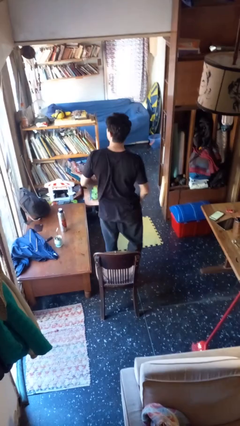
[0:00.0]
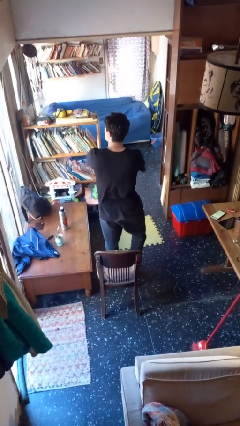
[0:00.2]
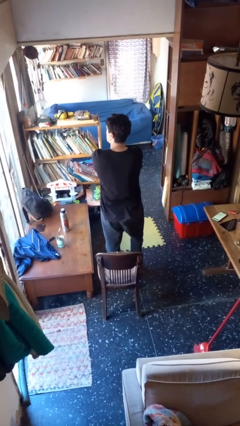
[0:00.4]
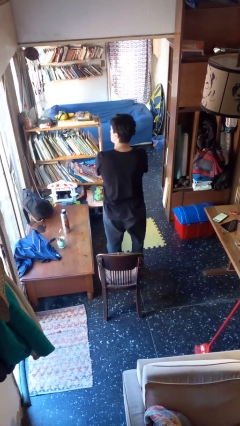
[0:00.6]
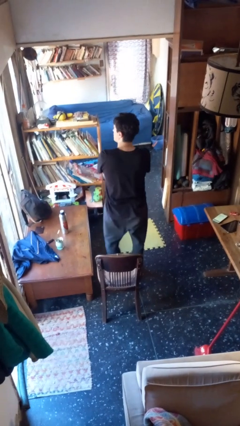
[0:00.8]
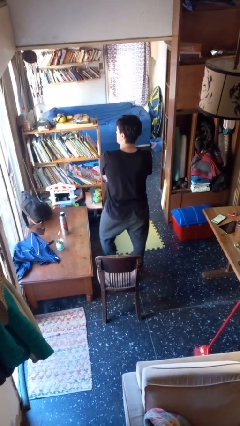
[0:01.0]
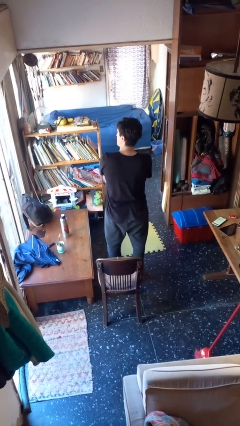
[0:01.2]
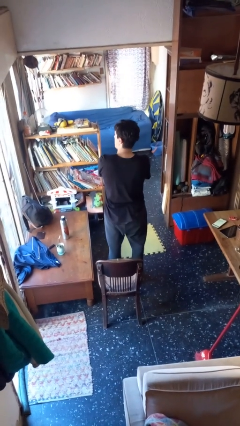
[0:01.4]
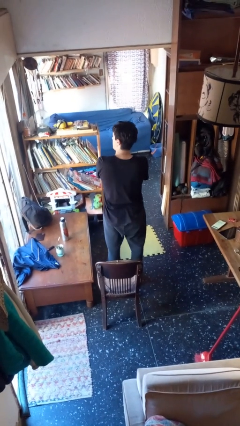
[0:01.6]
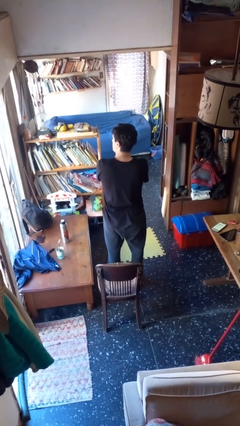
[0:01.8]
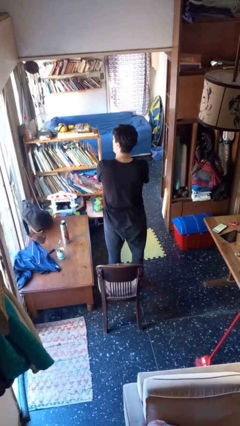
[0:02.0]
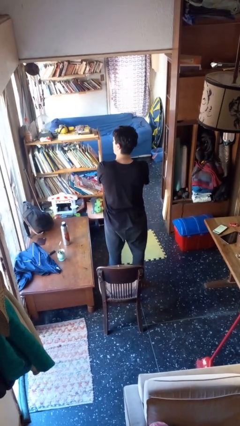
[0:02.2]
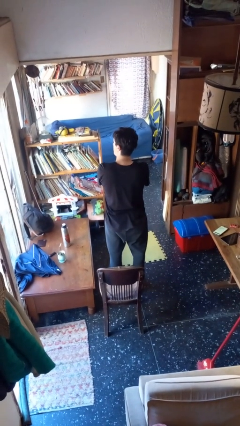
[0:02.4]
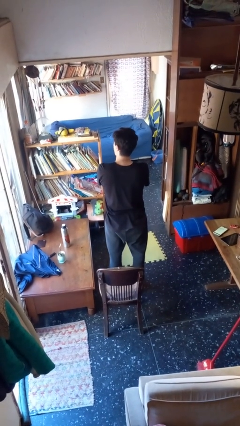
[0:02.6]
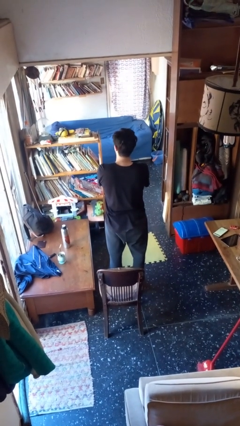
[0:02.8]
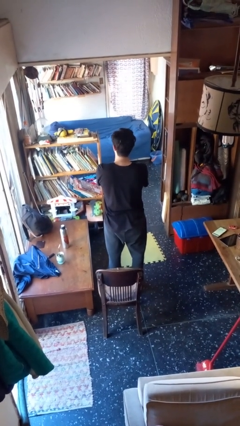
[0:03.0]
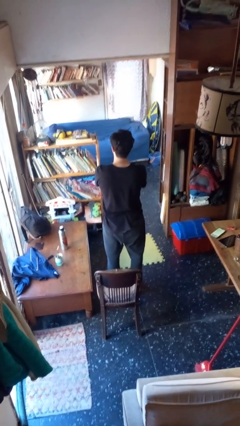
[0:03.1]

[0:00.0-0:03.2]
person crosses arms

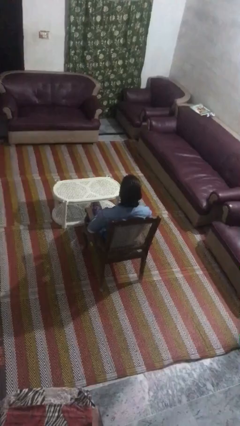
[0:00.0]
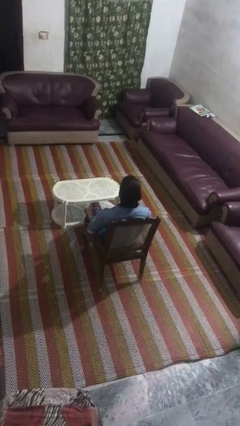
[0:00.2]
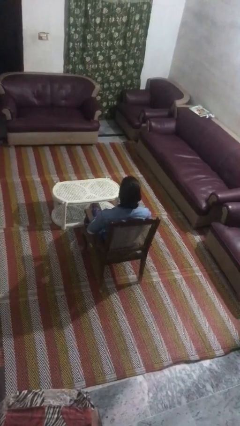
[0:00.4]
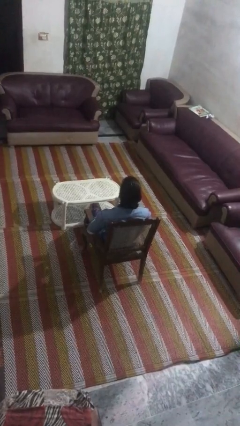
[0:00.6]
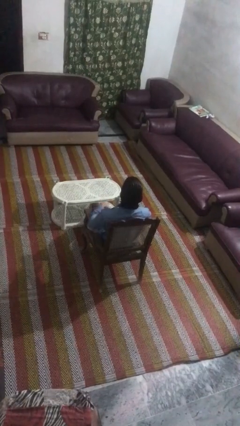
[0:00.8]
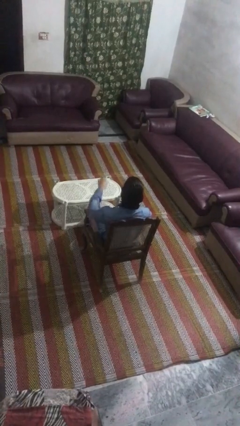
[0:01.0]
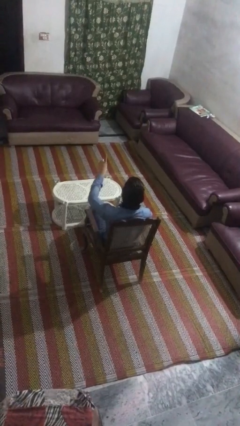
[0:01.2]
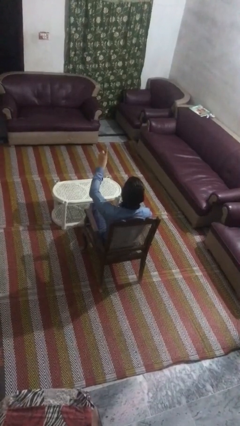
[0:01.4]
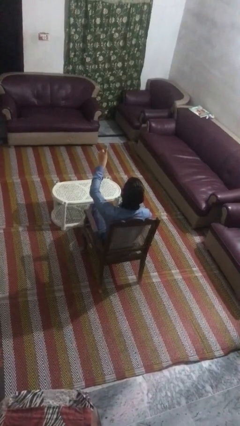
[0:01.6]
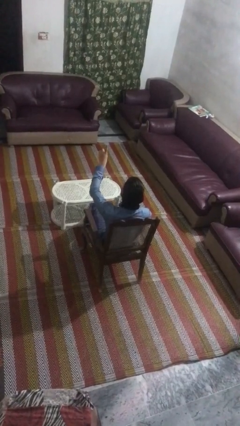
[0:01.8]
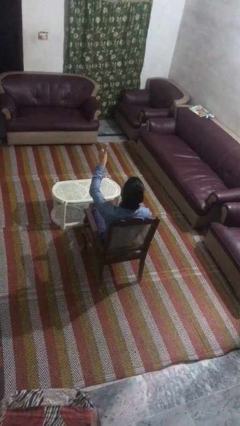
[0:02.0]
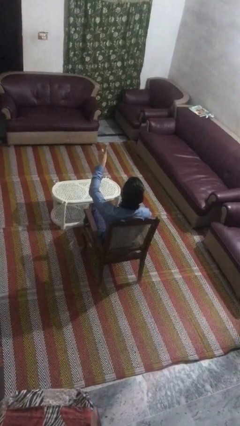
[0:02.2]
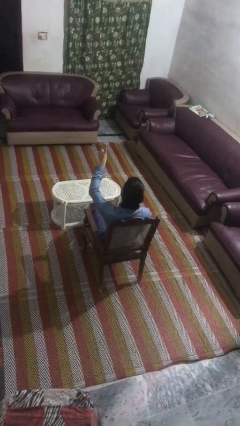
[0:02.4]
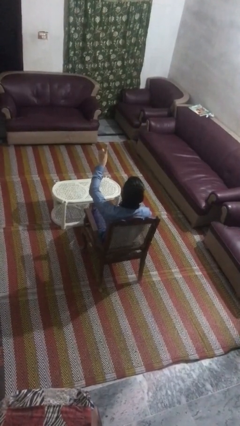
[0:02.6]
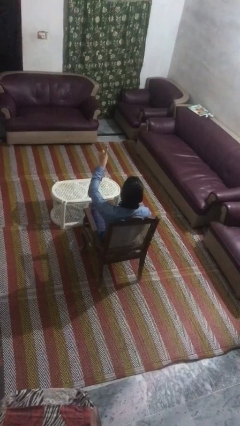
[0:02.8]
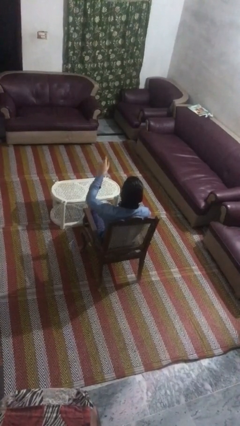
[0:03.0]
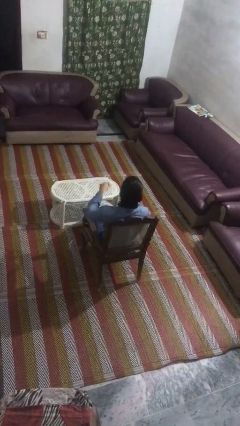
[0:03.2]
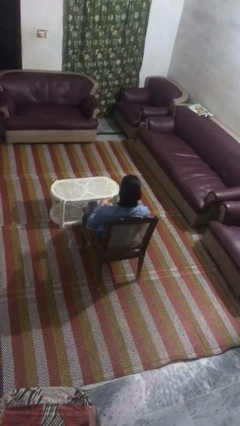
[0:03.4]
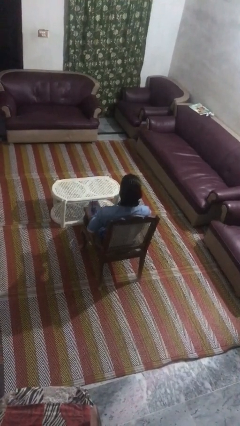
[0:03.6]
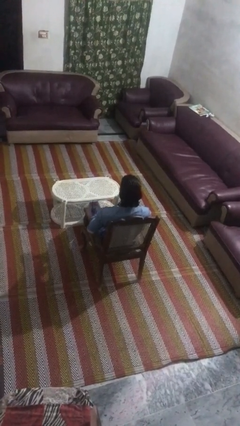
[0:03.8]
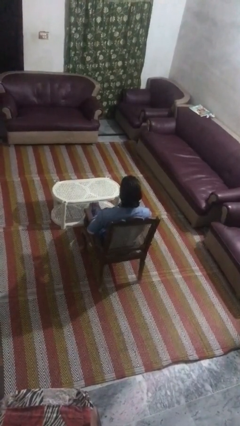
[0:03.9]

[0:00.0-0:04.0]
person gestures number one

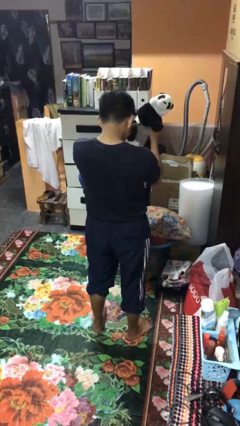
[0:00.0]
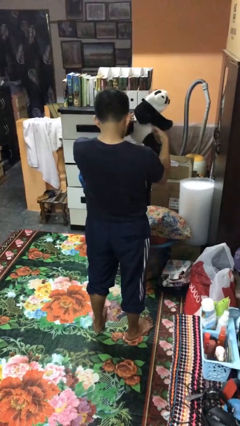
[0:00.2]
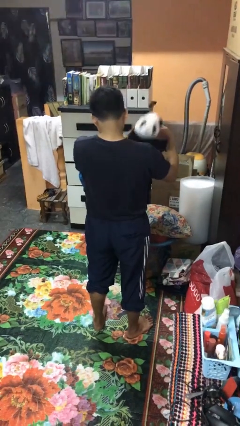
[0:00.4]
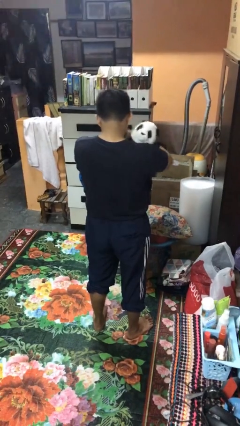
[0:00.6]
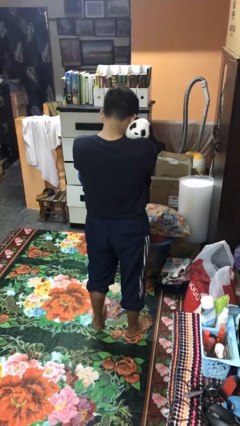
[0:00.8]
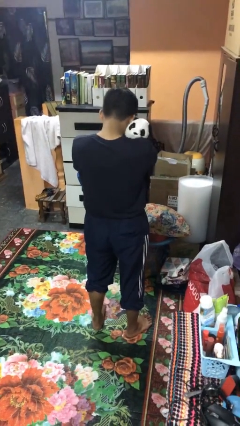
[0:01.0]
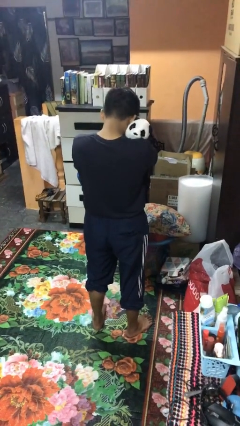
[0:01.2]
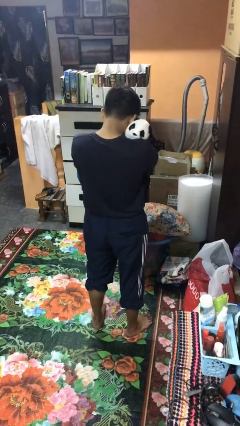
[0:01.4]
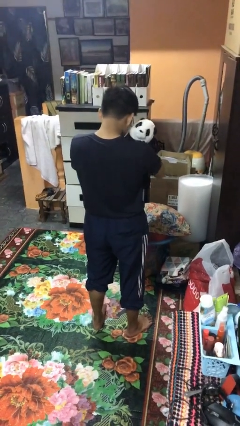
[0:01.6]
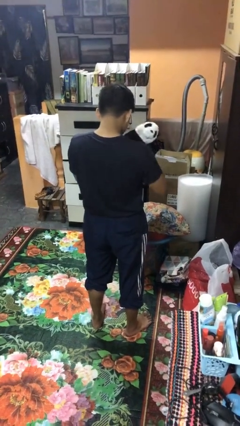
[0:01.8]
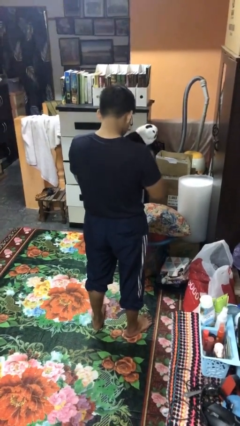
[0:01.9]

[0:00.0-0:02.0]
person hugs stuffed animal

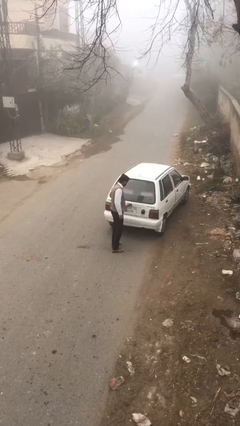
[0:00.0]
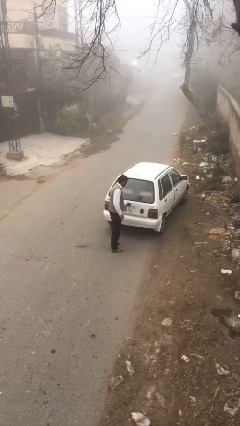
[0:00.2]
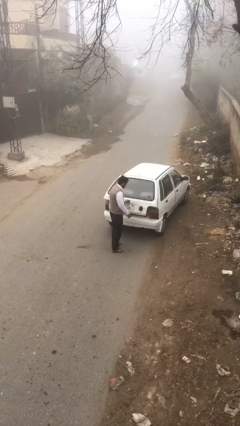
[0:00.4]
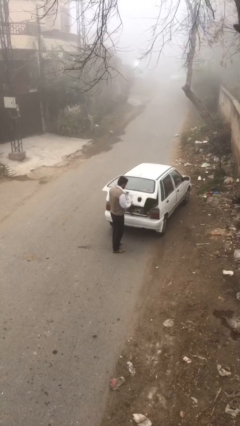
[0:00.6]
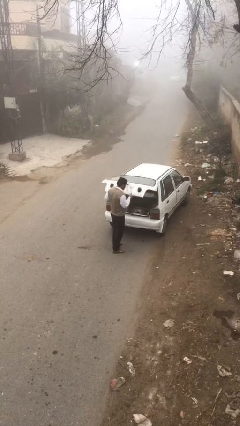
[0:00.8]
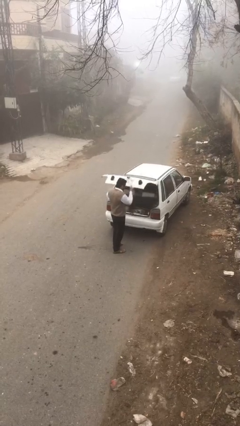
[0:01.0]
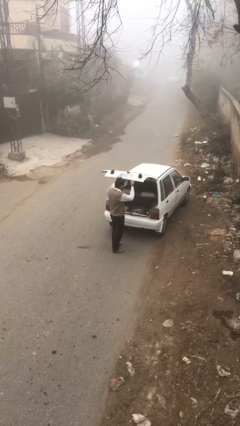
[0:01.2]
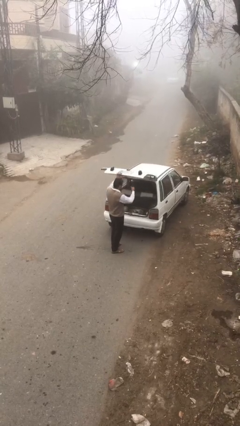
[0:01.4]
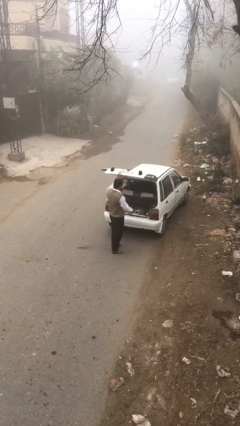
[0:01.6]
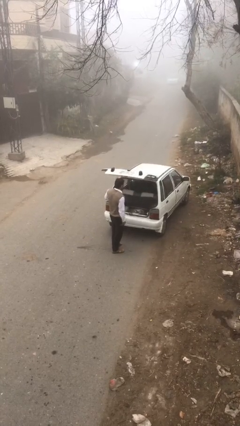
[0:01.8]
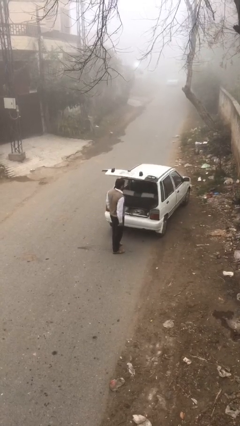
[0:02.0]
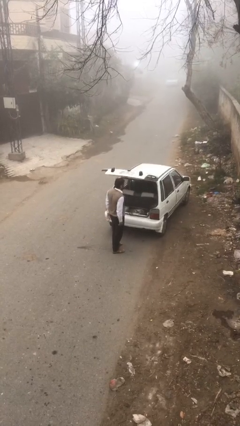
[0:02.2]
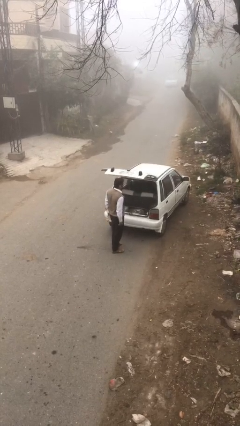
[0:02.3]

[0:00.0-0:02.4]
person opens car trunk

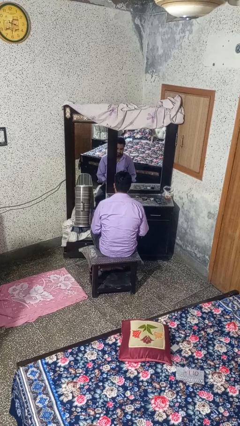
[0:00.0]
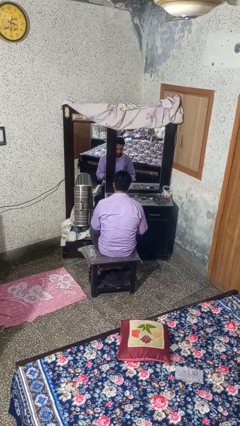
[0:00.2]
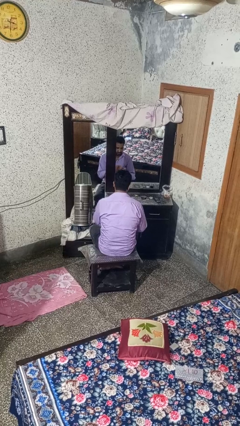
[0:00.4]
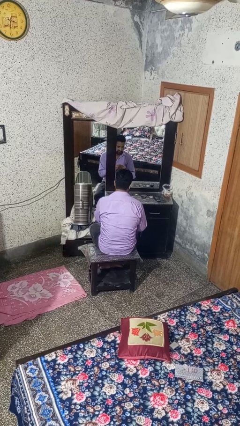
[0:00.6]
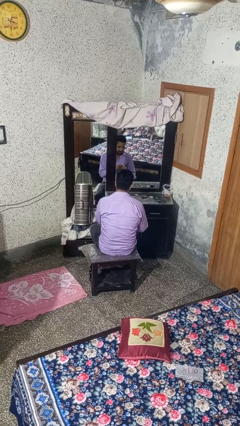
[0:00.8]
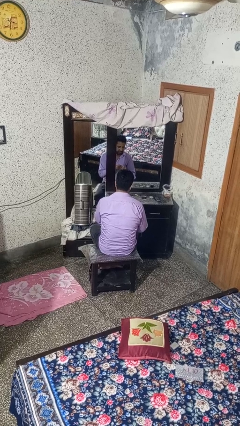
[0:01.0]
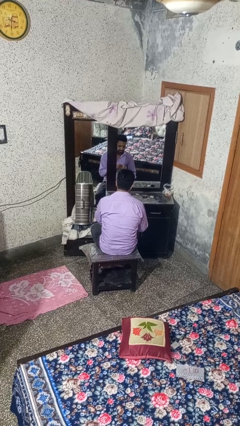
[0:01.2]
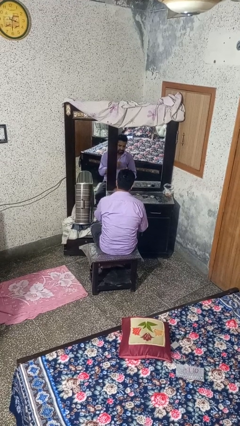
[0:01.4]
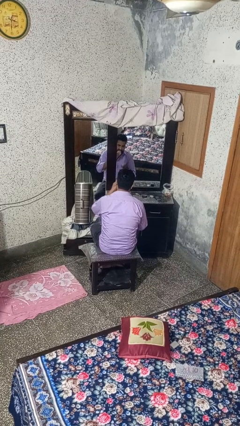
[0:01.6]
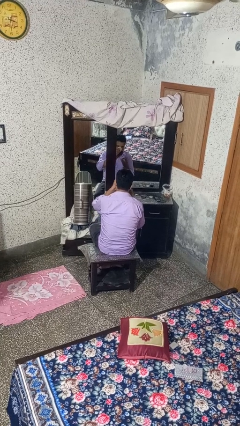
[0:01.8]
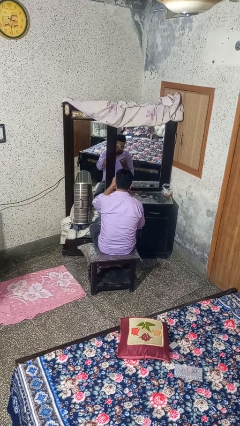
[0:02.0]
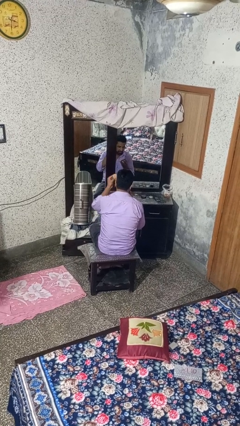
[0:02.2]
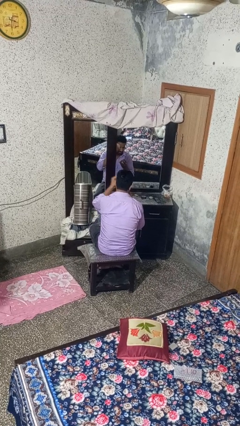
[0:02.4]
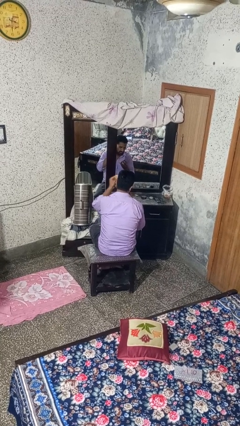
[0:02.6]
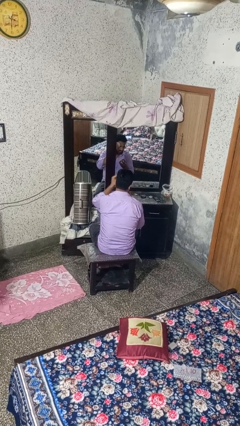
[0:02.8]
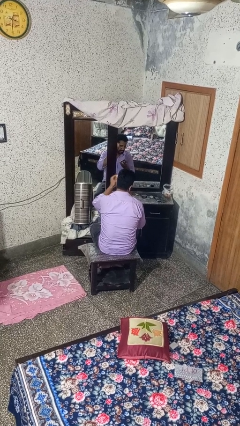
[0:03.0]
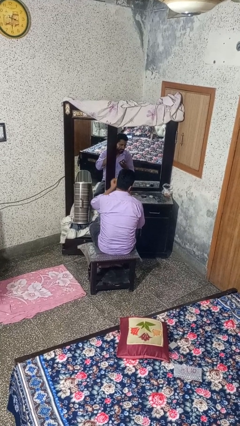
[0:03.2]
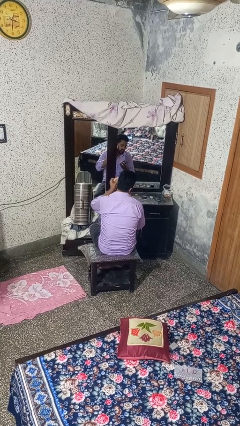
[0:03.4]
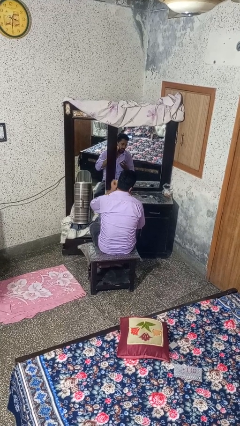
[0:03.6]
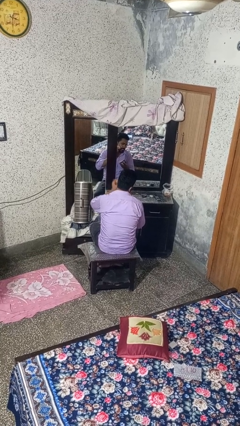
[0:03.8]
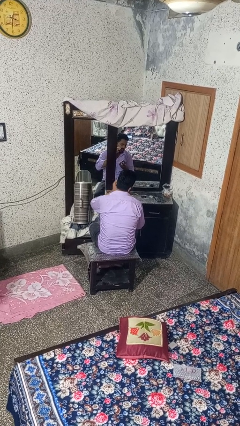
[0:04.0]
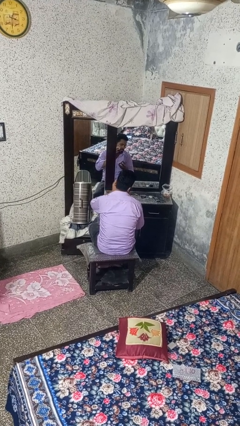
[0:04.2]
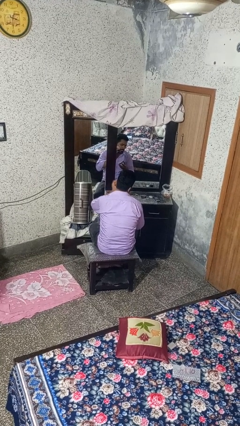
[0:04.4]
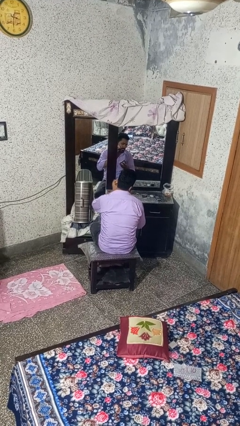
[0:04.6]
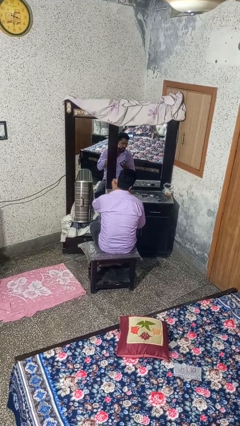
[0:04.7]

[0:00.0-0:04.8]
person applies foundation makeup

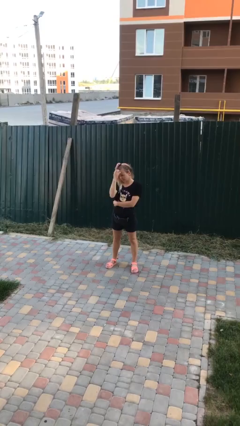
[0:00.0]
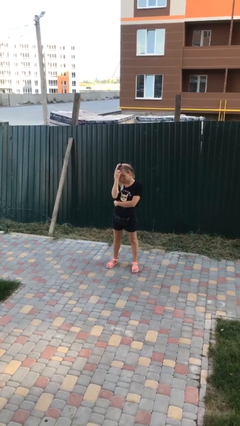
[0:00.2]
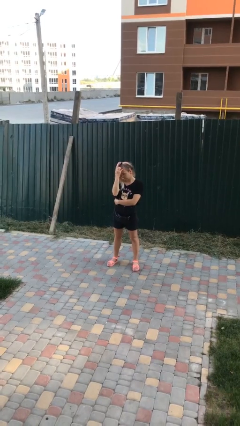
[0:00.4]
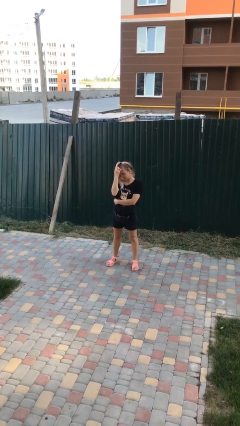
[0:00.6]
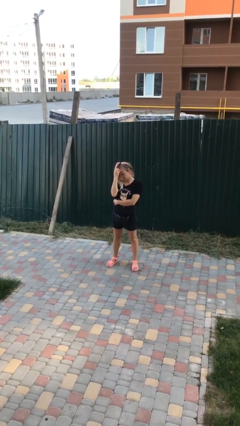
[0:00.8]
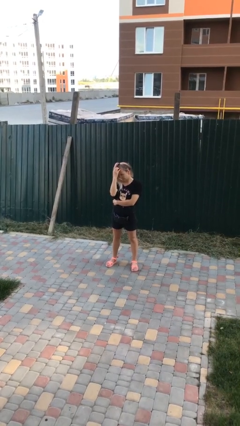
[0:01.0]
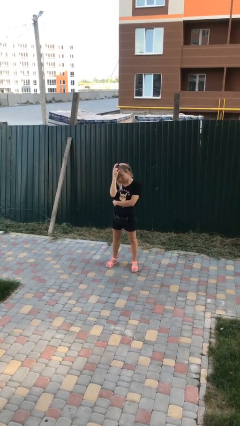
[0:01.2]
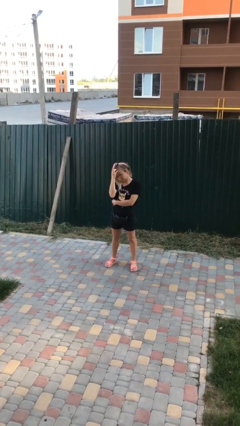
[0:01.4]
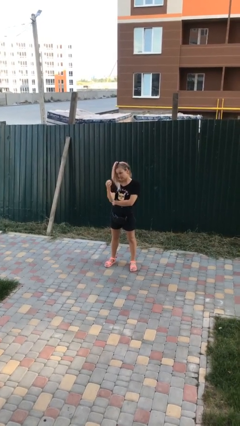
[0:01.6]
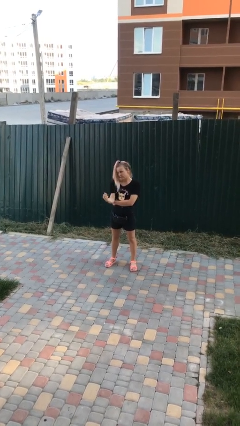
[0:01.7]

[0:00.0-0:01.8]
person scratches face
